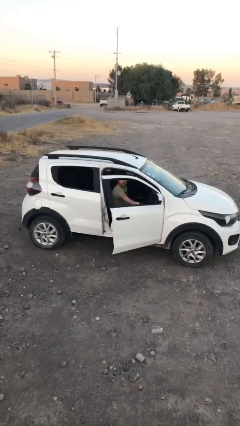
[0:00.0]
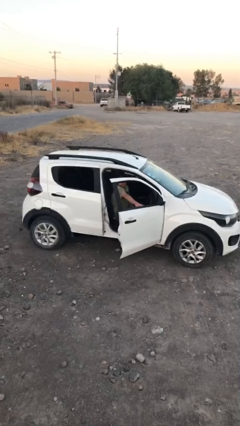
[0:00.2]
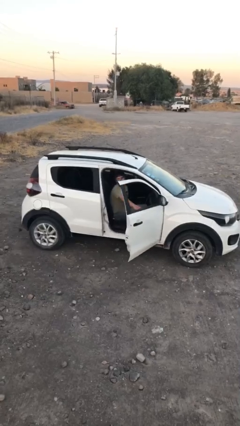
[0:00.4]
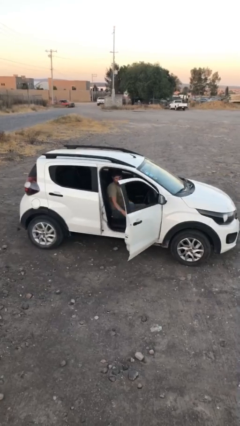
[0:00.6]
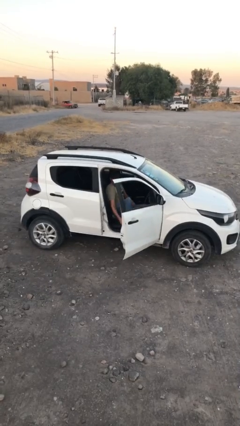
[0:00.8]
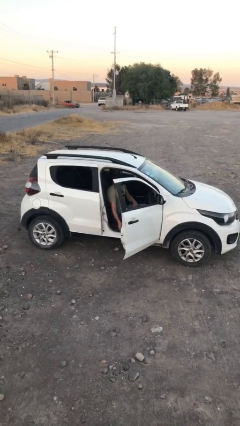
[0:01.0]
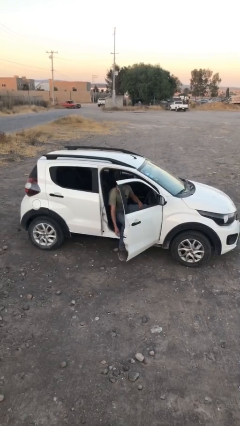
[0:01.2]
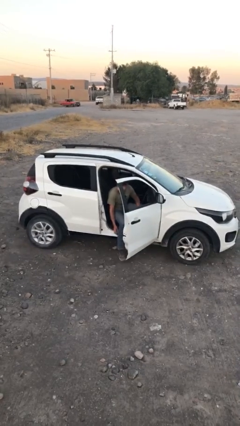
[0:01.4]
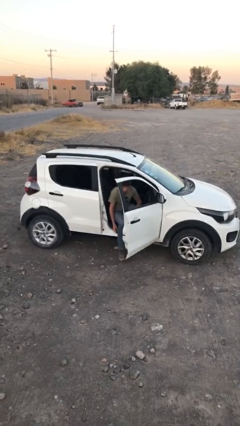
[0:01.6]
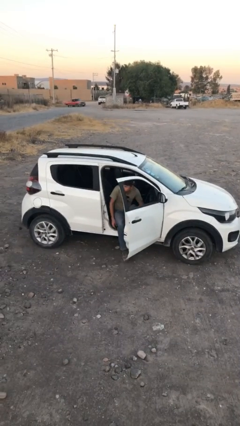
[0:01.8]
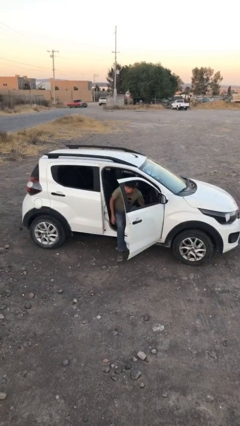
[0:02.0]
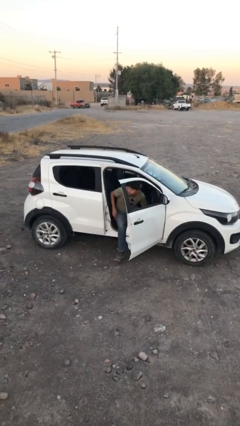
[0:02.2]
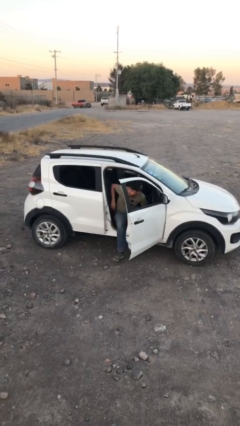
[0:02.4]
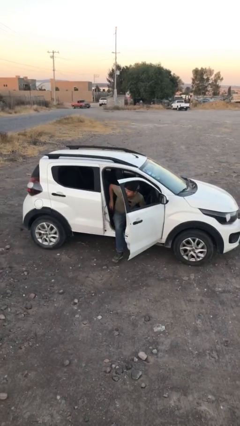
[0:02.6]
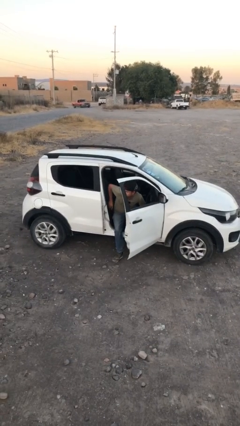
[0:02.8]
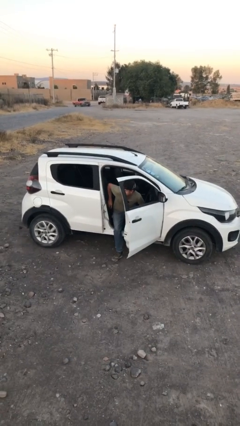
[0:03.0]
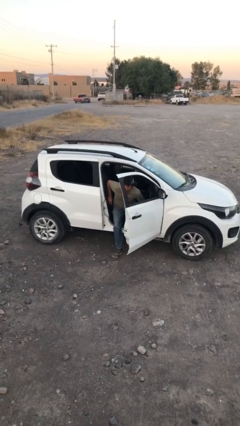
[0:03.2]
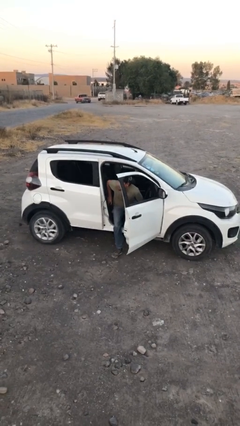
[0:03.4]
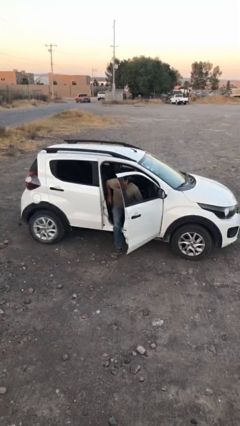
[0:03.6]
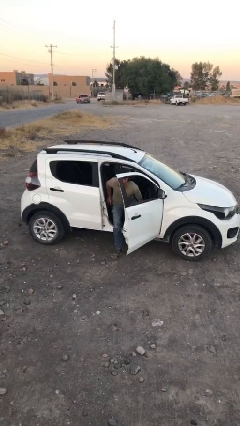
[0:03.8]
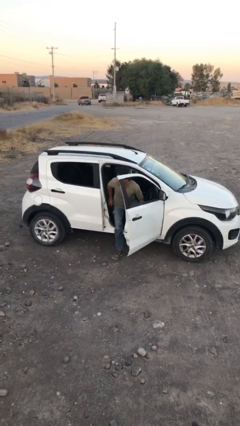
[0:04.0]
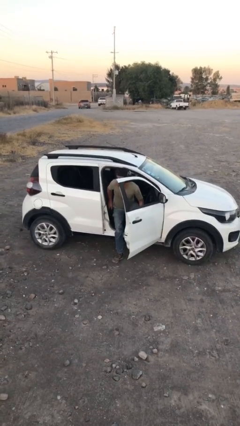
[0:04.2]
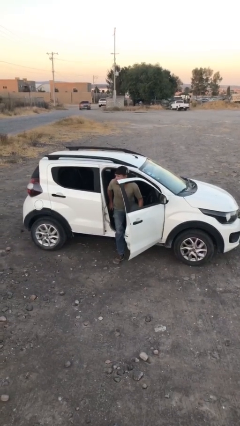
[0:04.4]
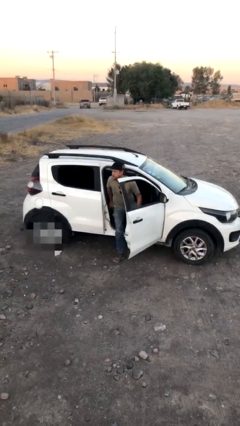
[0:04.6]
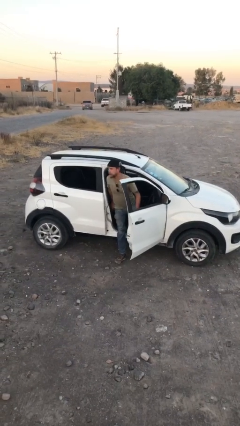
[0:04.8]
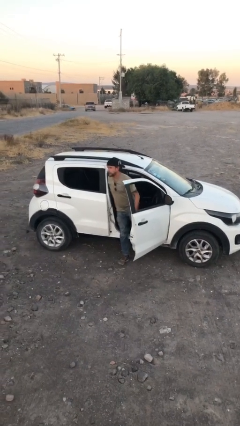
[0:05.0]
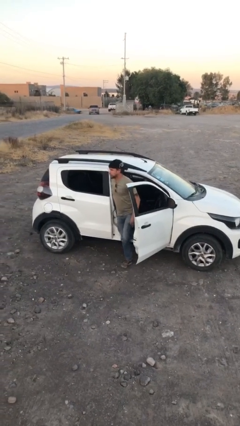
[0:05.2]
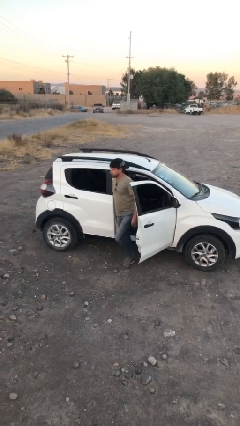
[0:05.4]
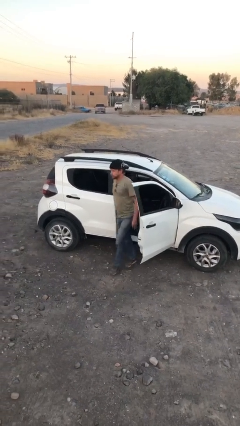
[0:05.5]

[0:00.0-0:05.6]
person exits car

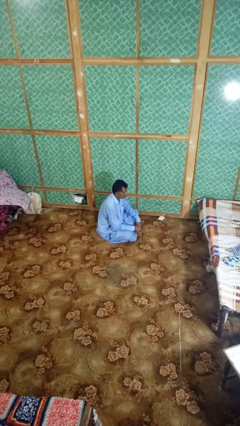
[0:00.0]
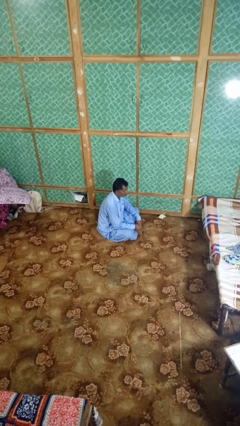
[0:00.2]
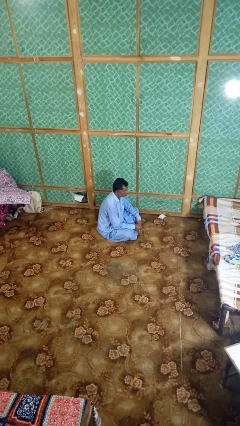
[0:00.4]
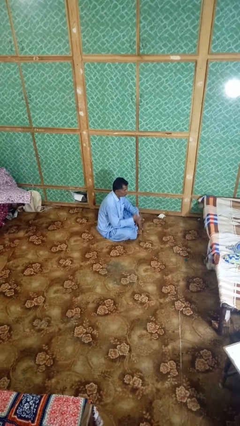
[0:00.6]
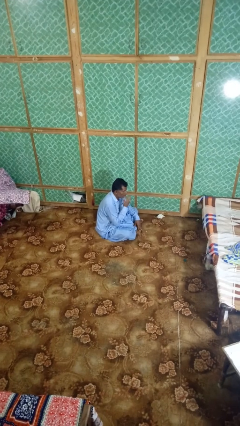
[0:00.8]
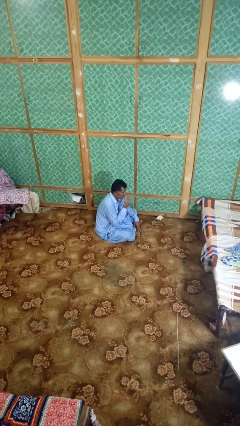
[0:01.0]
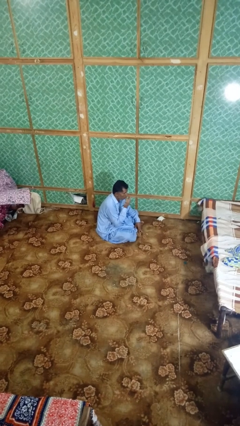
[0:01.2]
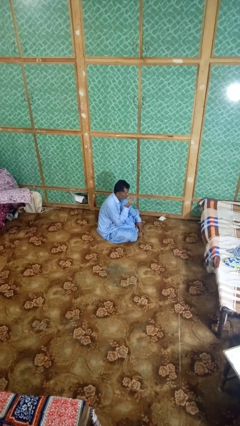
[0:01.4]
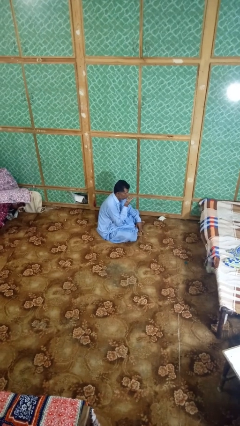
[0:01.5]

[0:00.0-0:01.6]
person licks fingers

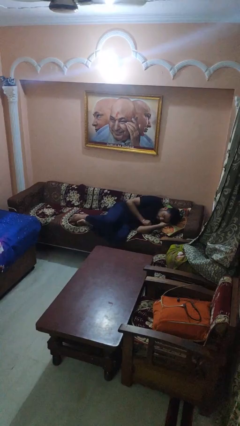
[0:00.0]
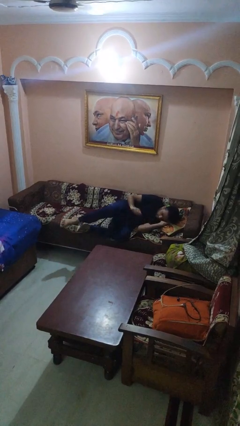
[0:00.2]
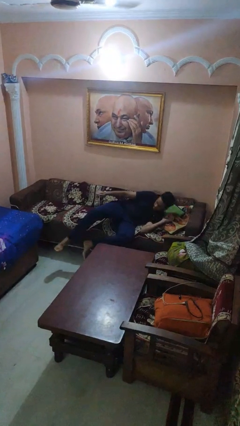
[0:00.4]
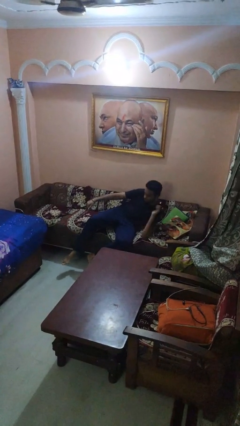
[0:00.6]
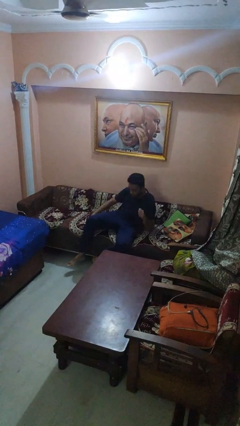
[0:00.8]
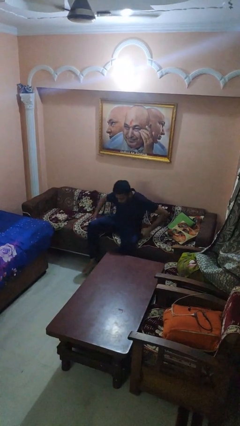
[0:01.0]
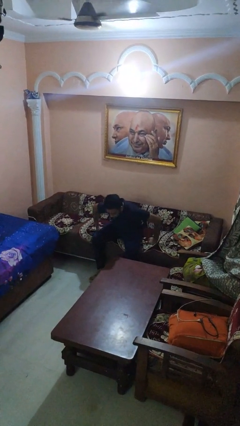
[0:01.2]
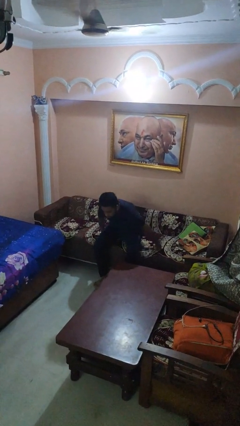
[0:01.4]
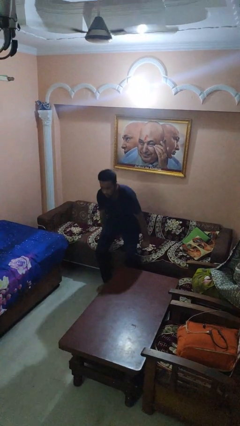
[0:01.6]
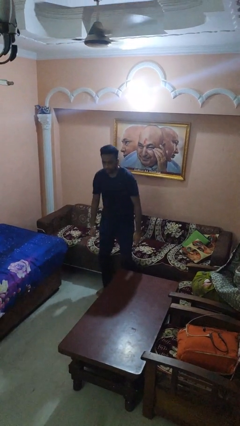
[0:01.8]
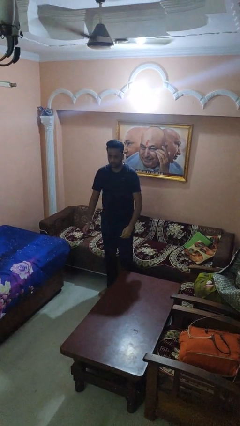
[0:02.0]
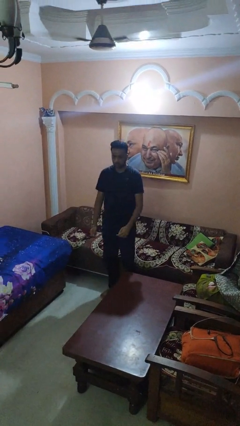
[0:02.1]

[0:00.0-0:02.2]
person stands up

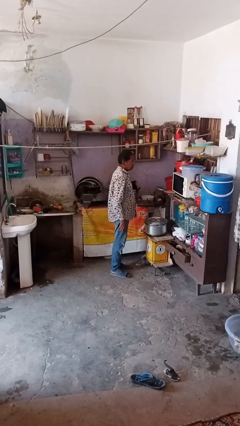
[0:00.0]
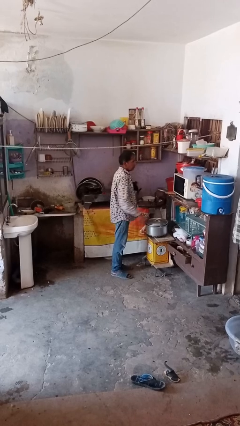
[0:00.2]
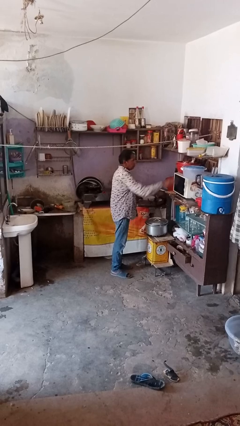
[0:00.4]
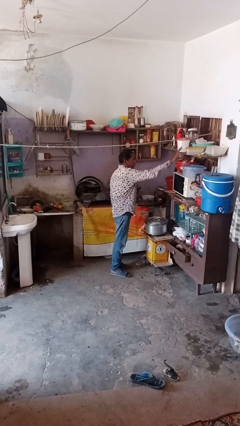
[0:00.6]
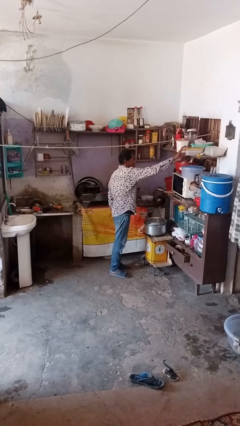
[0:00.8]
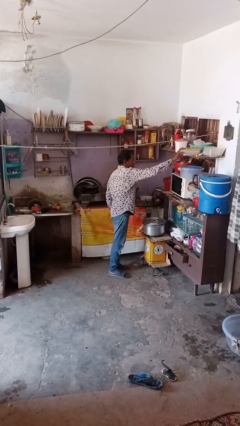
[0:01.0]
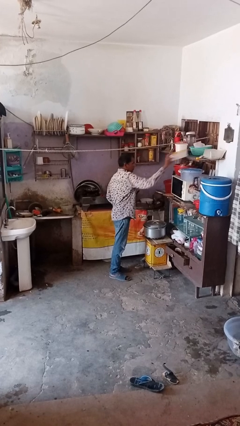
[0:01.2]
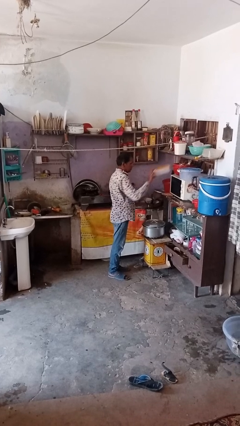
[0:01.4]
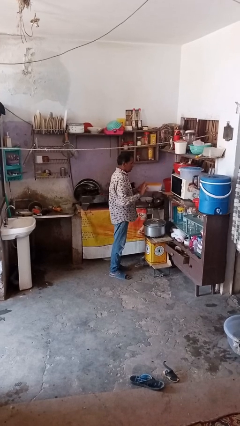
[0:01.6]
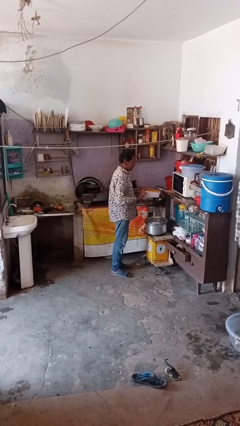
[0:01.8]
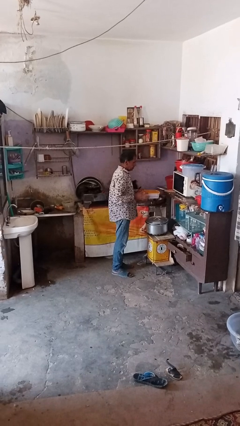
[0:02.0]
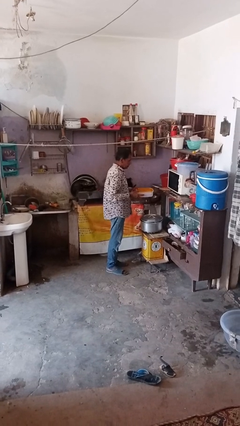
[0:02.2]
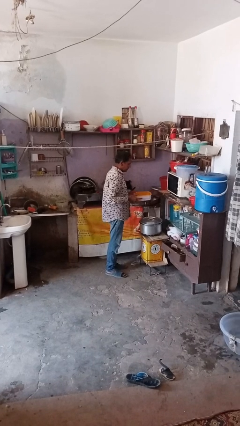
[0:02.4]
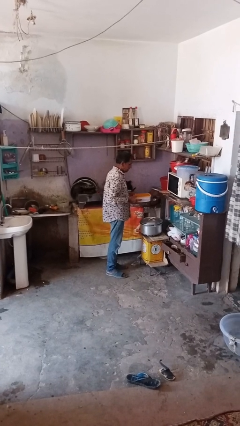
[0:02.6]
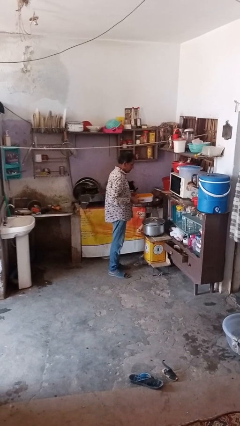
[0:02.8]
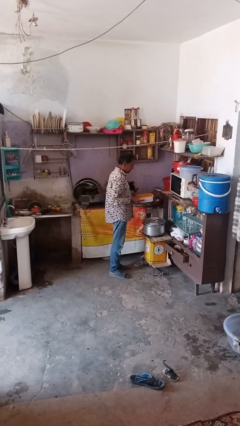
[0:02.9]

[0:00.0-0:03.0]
person picks up object from shelf

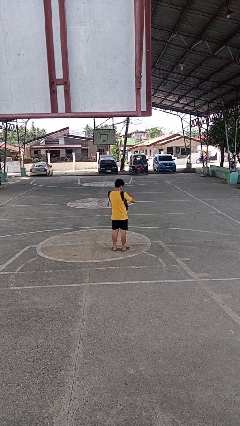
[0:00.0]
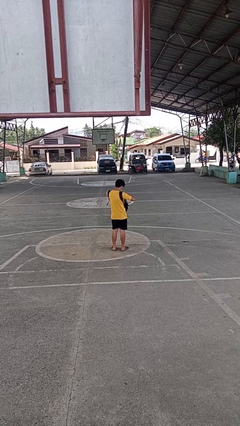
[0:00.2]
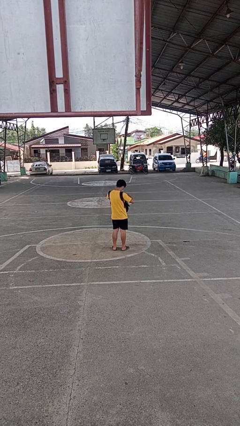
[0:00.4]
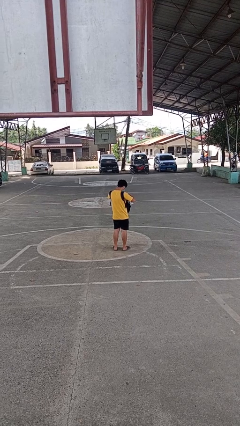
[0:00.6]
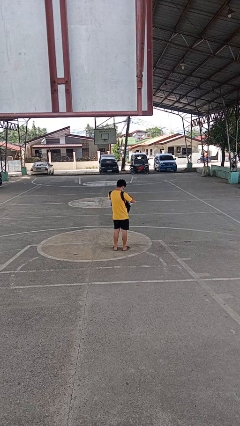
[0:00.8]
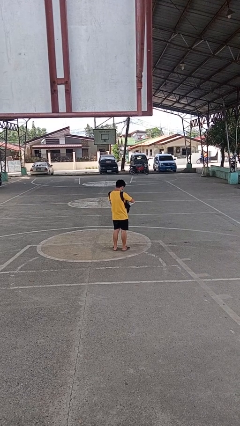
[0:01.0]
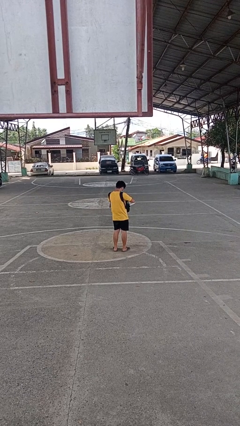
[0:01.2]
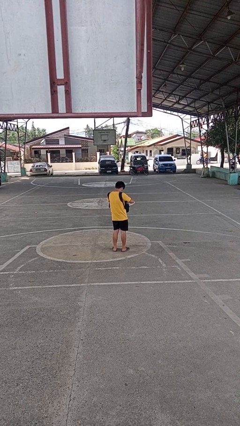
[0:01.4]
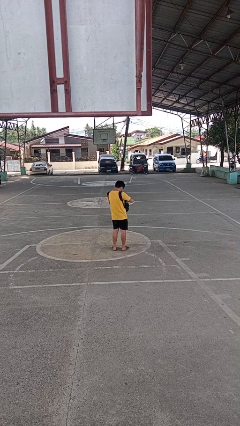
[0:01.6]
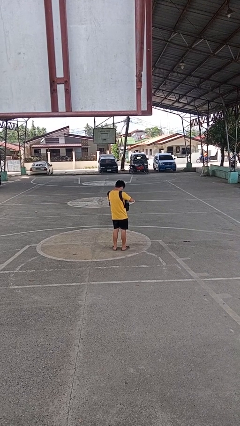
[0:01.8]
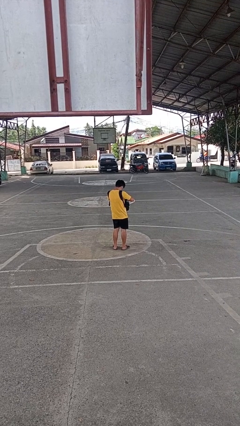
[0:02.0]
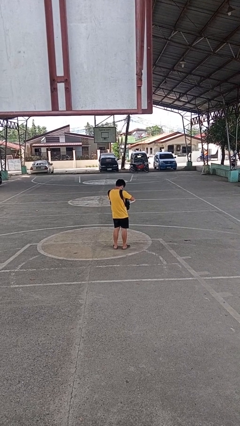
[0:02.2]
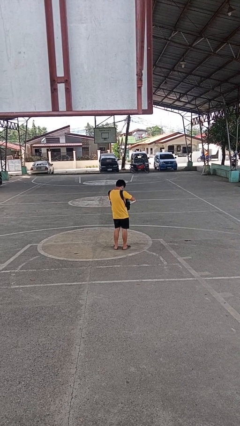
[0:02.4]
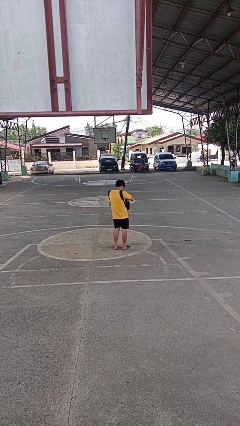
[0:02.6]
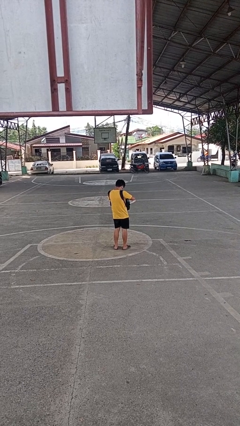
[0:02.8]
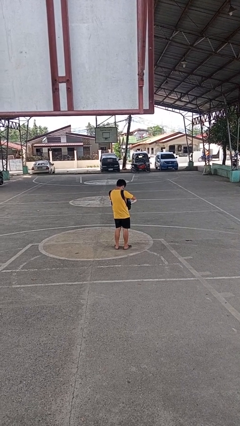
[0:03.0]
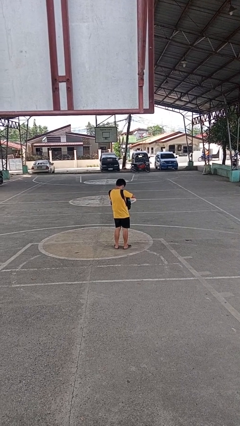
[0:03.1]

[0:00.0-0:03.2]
person searches in backpack

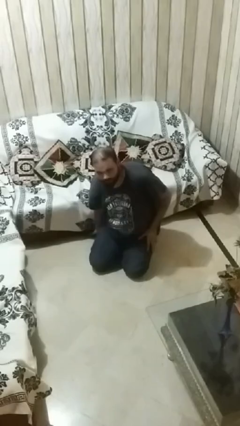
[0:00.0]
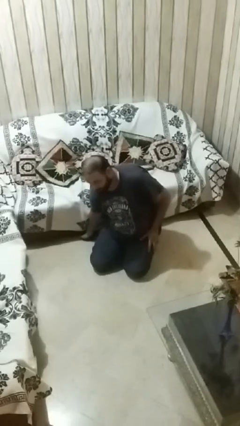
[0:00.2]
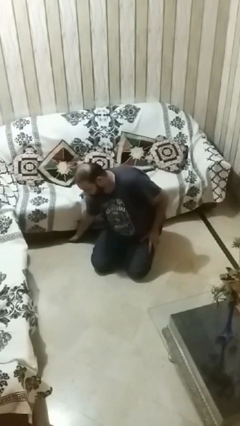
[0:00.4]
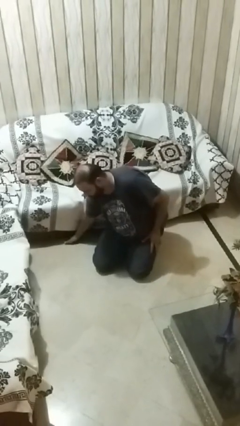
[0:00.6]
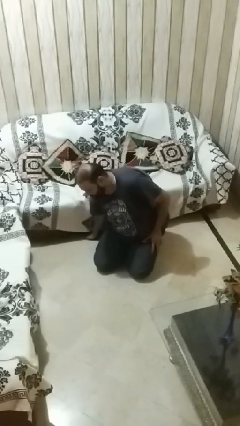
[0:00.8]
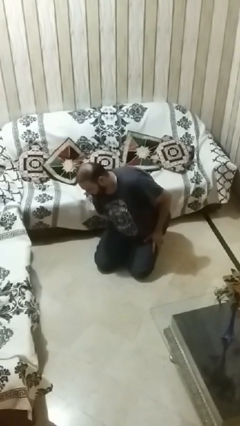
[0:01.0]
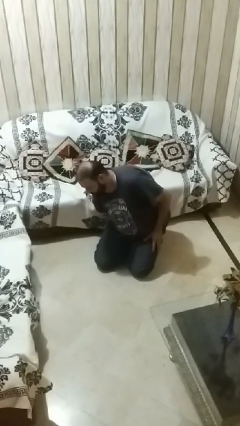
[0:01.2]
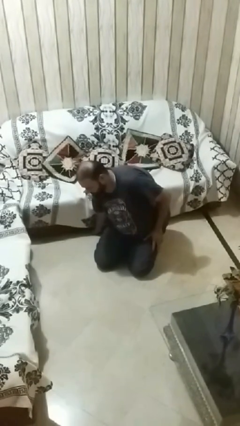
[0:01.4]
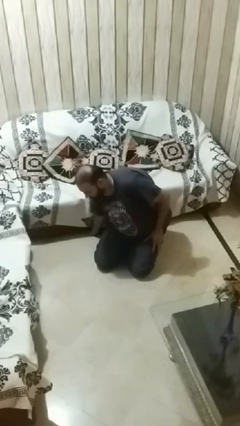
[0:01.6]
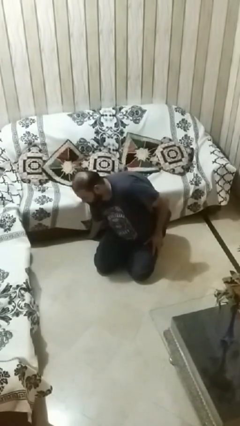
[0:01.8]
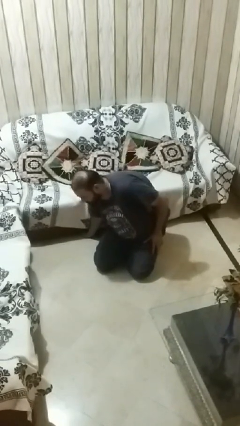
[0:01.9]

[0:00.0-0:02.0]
person searches under couch
